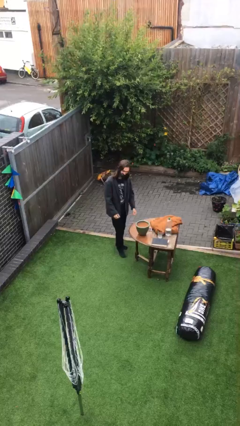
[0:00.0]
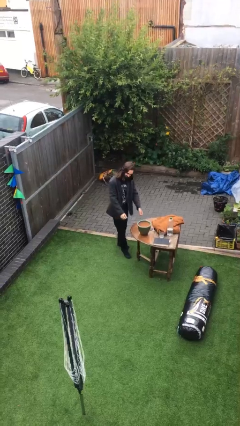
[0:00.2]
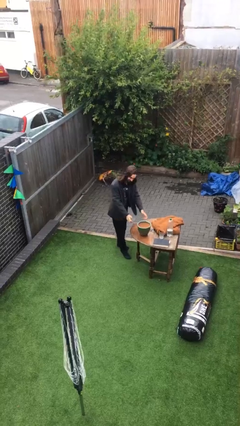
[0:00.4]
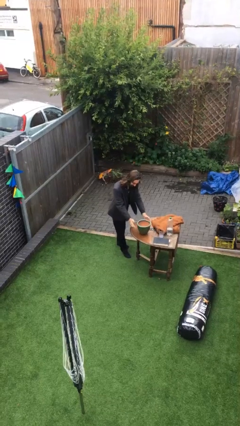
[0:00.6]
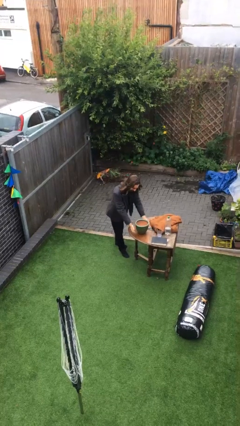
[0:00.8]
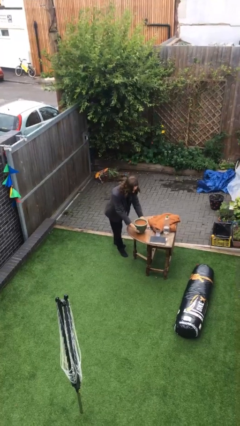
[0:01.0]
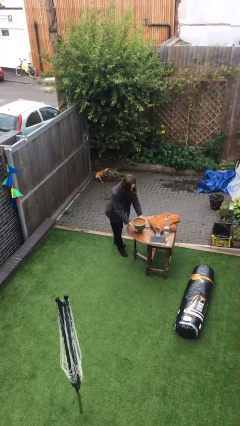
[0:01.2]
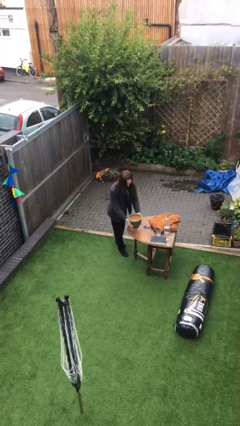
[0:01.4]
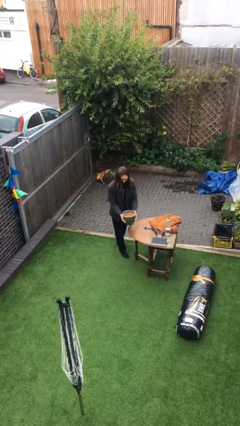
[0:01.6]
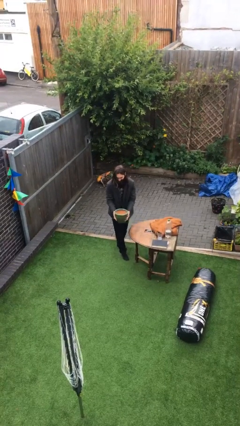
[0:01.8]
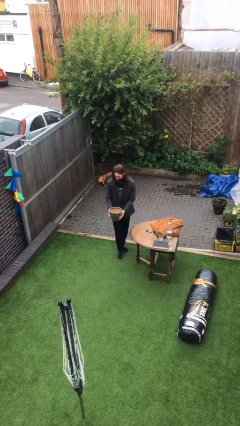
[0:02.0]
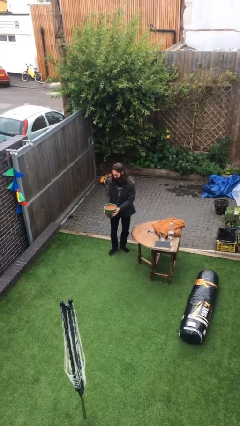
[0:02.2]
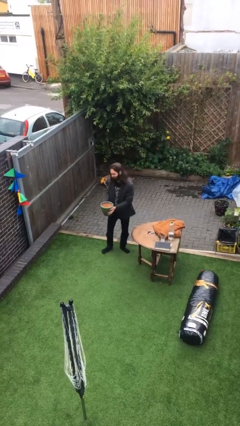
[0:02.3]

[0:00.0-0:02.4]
person picks up object from table

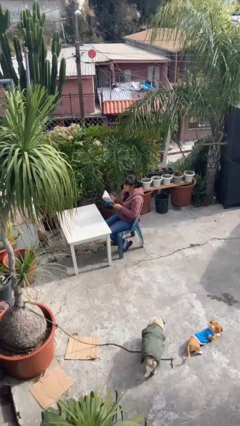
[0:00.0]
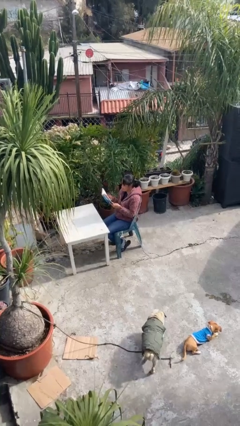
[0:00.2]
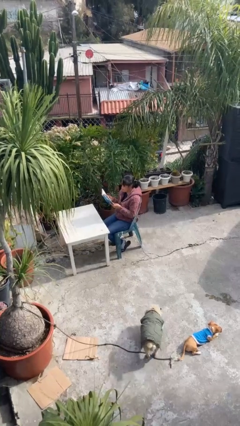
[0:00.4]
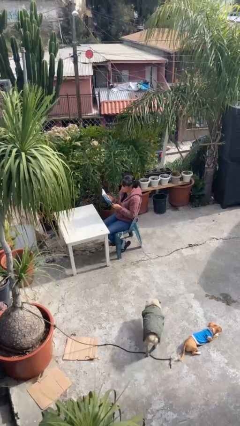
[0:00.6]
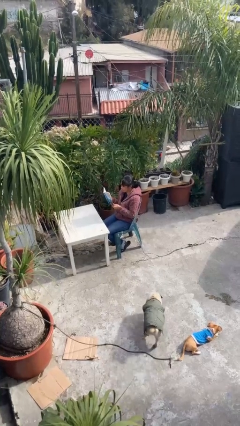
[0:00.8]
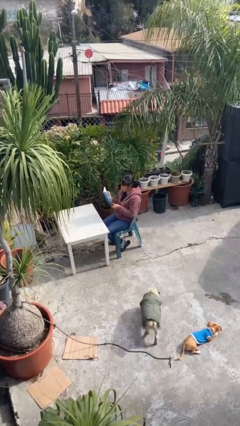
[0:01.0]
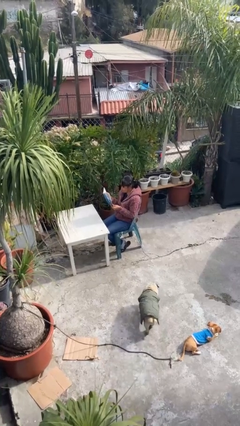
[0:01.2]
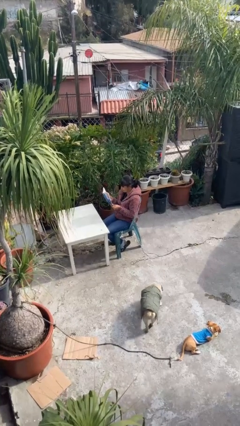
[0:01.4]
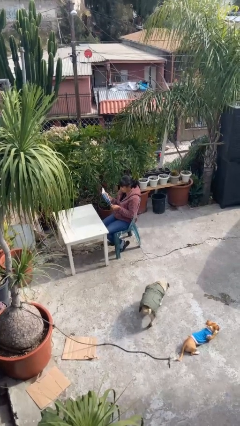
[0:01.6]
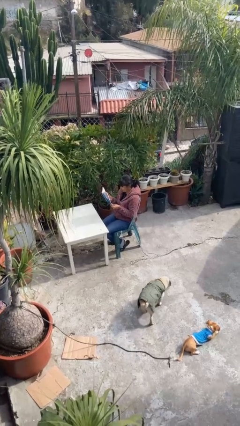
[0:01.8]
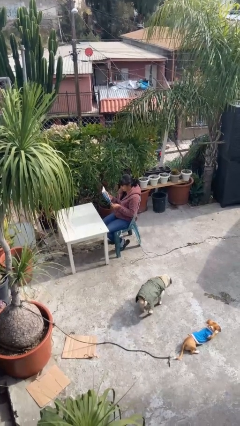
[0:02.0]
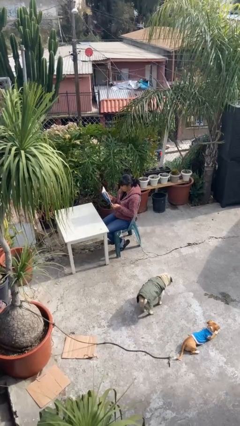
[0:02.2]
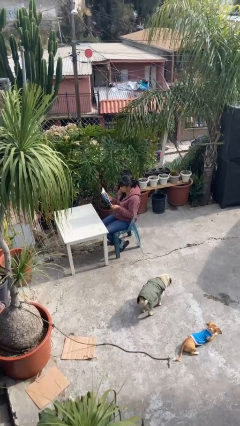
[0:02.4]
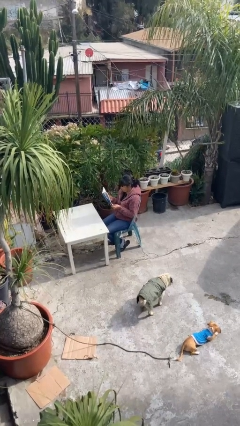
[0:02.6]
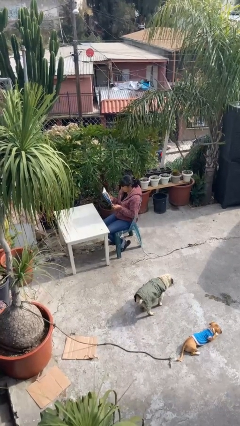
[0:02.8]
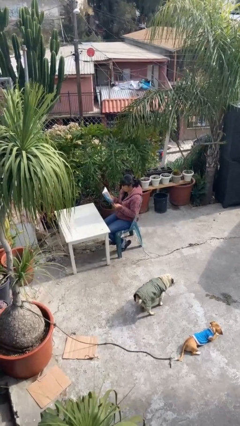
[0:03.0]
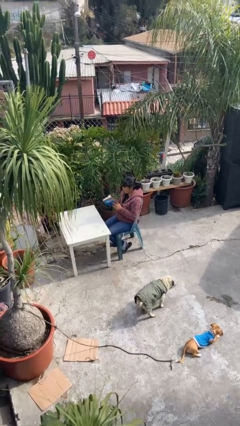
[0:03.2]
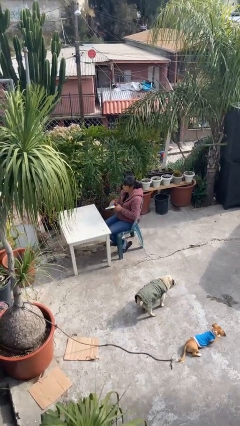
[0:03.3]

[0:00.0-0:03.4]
person reads document

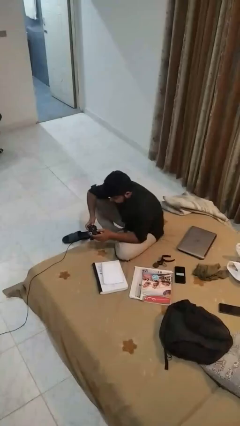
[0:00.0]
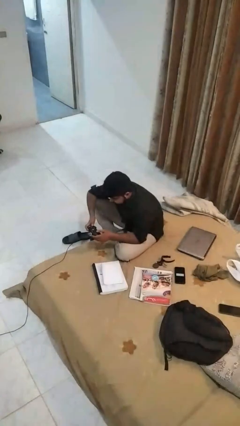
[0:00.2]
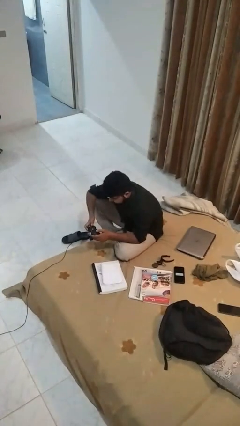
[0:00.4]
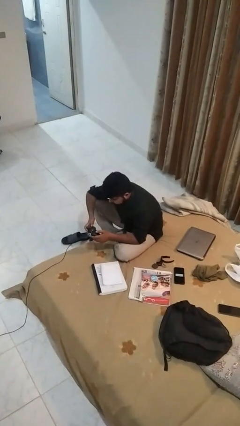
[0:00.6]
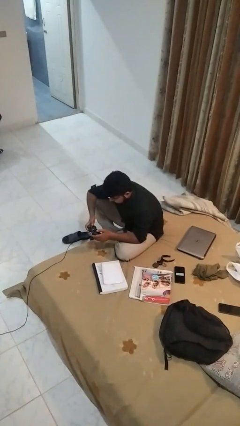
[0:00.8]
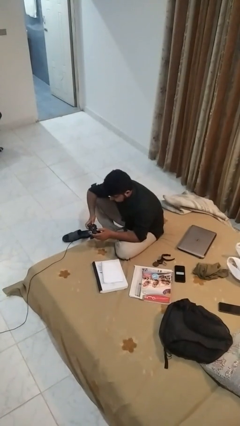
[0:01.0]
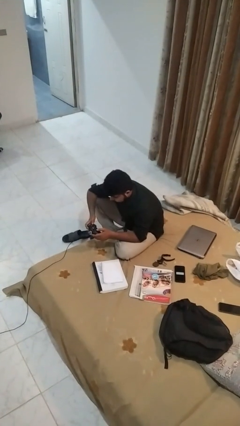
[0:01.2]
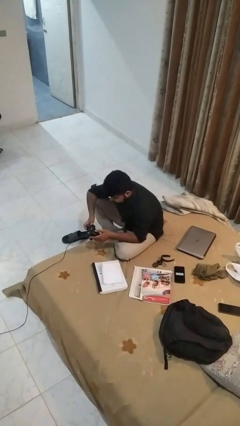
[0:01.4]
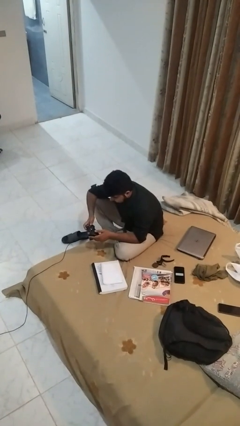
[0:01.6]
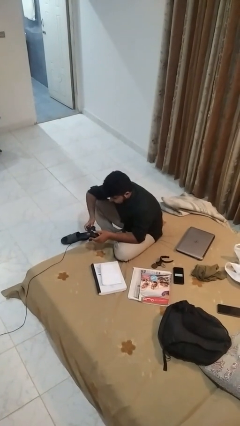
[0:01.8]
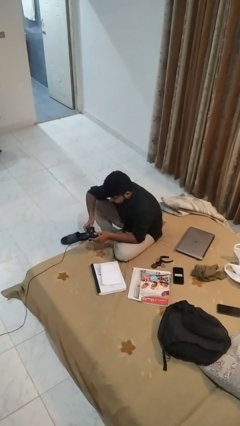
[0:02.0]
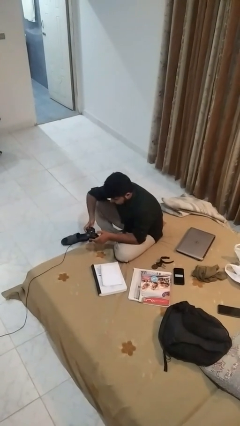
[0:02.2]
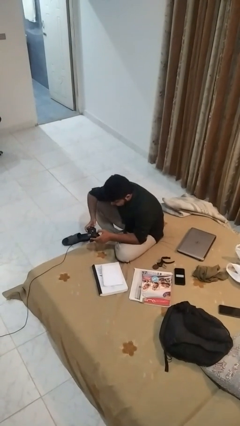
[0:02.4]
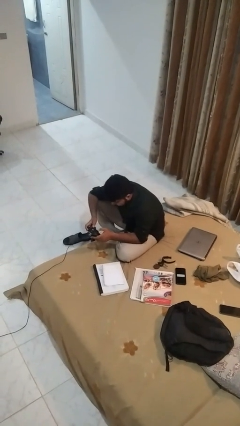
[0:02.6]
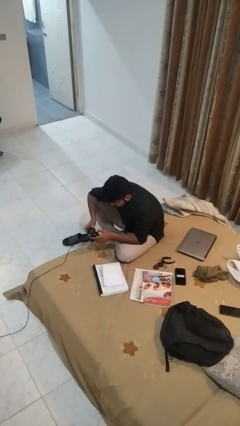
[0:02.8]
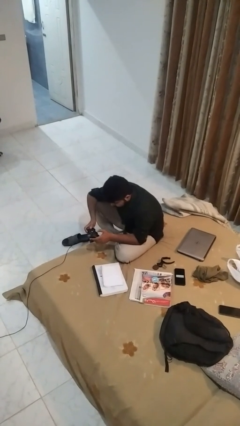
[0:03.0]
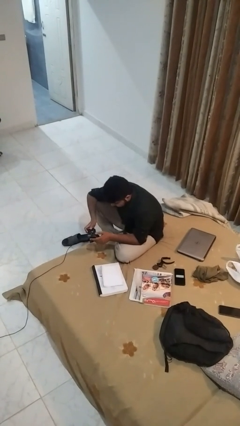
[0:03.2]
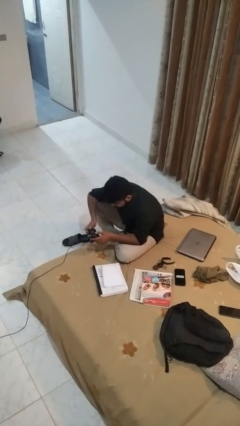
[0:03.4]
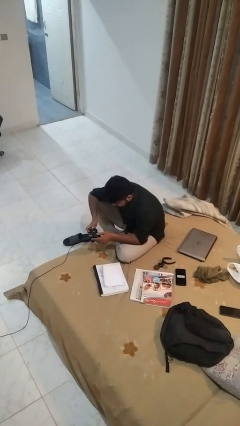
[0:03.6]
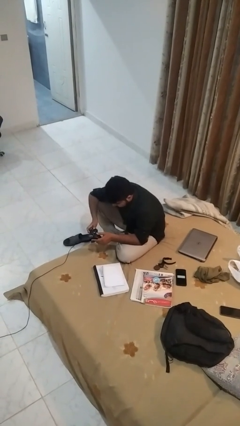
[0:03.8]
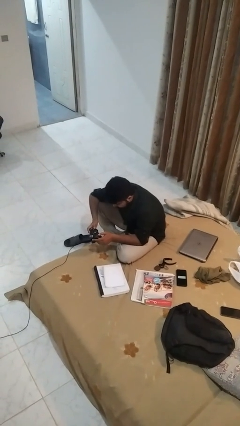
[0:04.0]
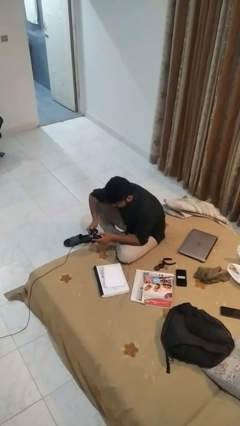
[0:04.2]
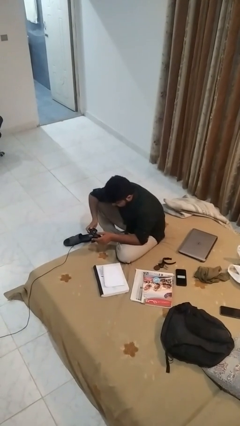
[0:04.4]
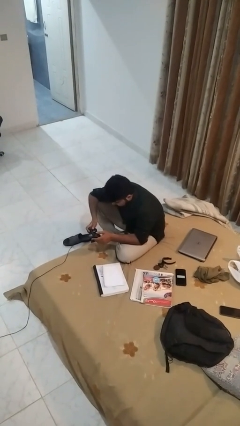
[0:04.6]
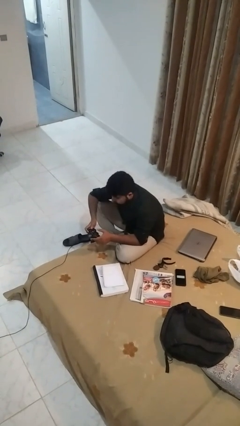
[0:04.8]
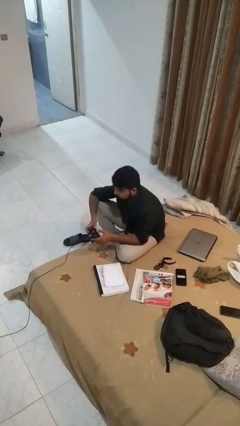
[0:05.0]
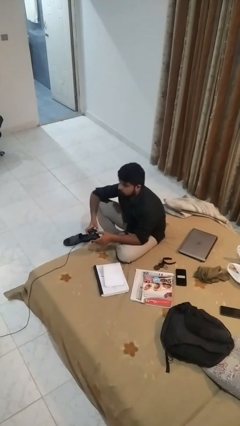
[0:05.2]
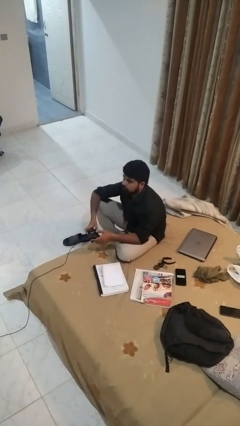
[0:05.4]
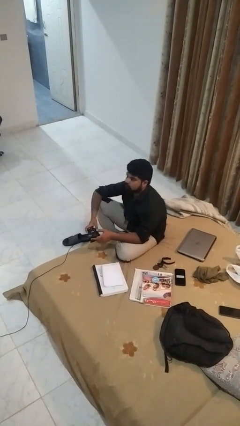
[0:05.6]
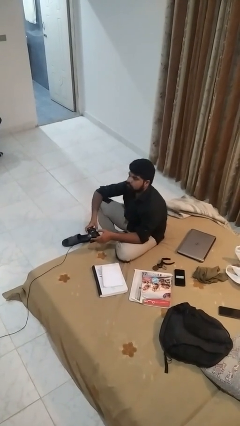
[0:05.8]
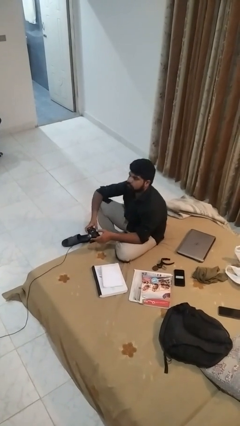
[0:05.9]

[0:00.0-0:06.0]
person interacts with handheld game

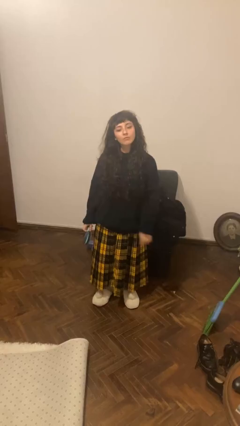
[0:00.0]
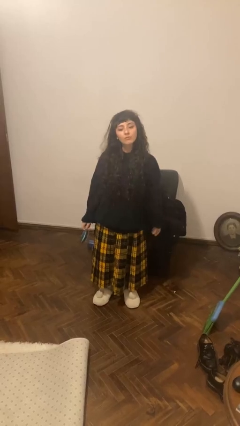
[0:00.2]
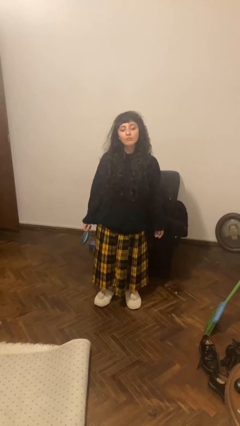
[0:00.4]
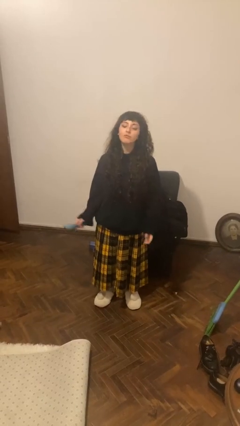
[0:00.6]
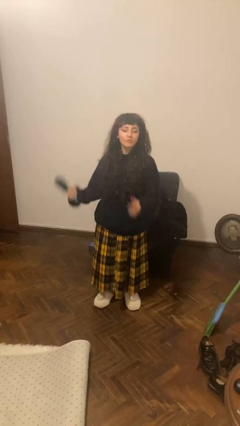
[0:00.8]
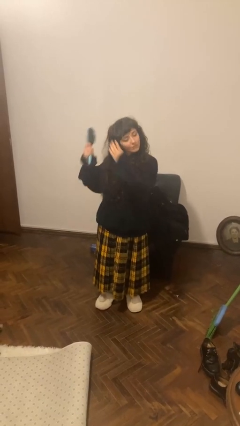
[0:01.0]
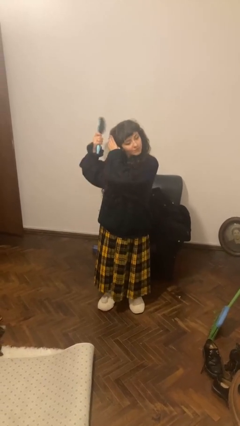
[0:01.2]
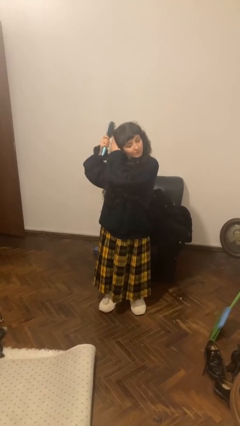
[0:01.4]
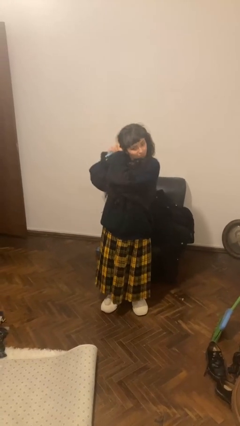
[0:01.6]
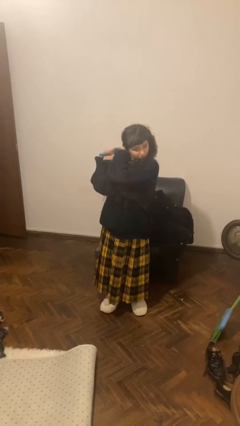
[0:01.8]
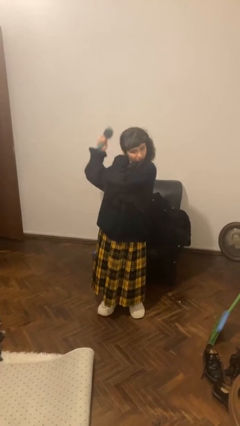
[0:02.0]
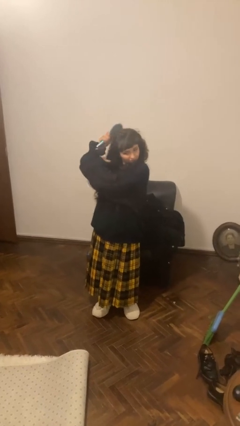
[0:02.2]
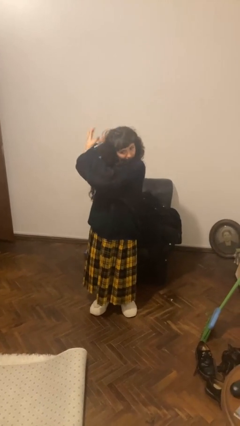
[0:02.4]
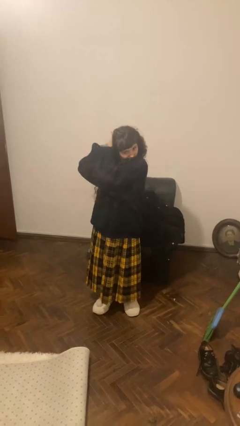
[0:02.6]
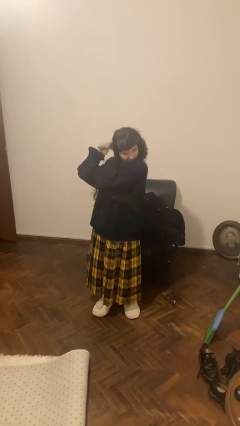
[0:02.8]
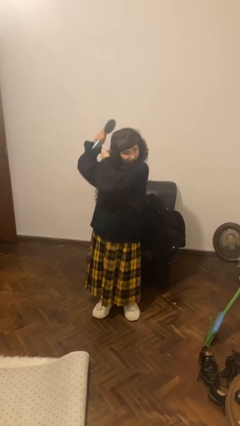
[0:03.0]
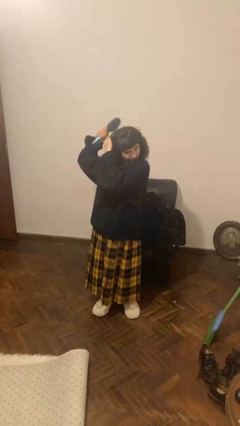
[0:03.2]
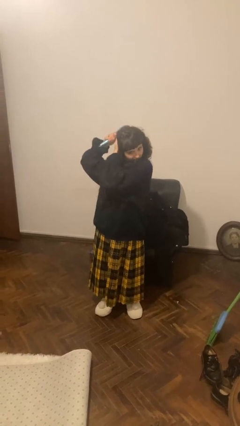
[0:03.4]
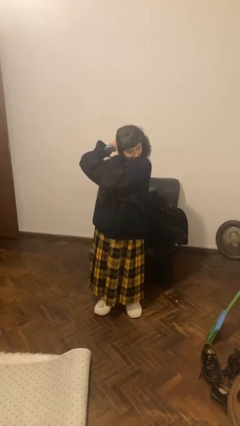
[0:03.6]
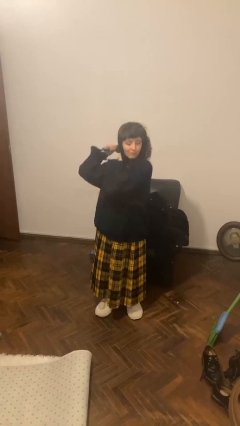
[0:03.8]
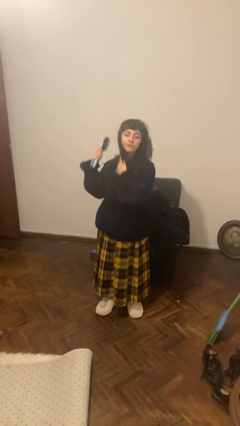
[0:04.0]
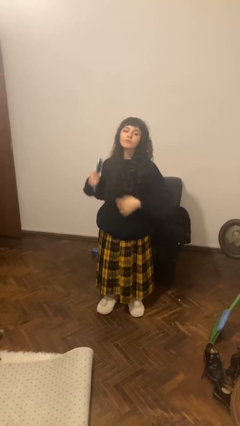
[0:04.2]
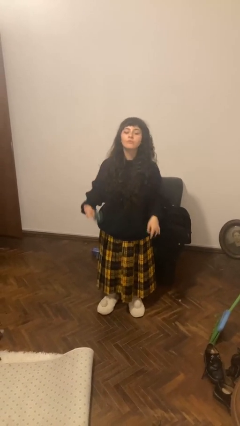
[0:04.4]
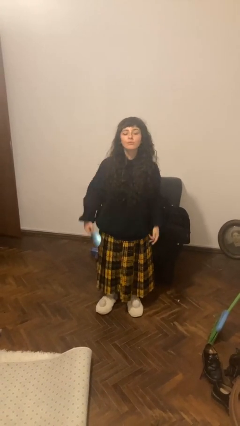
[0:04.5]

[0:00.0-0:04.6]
person brushes hair

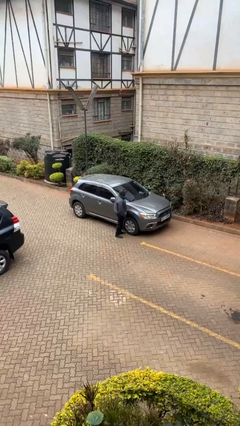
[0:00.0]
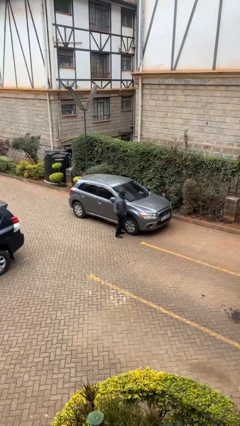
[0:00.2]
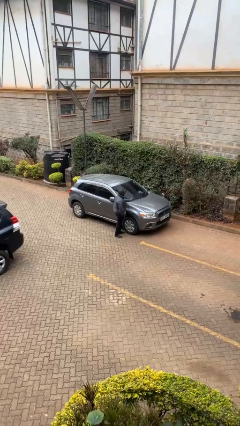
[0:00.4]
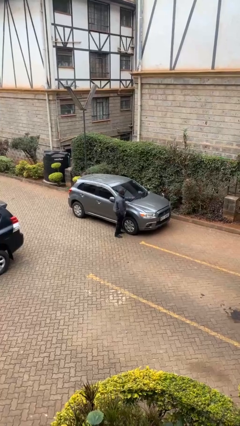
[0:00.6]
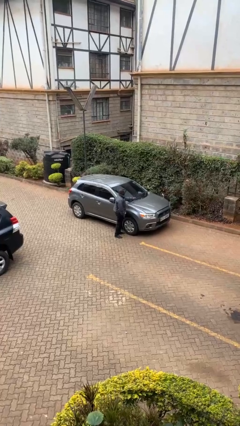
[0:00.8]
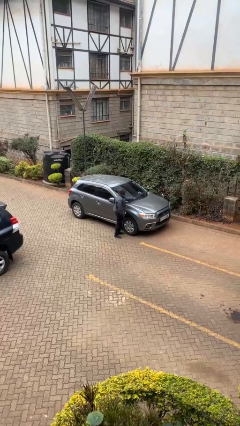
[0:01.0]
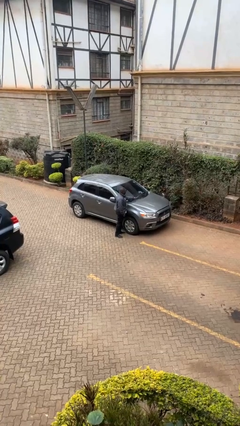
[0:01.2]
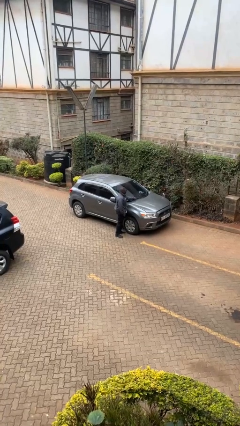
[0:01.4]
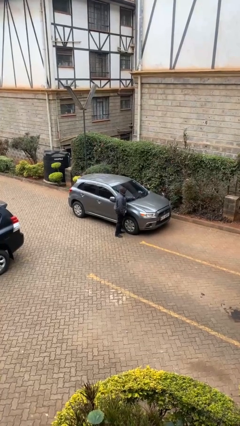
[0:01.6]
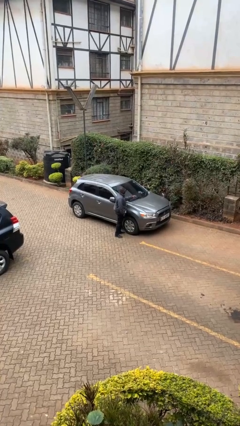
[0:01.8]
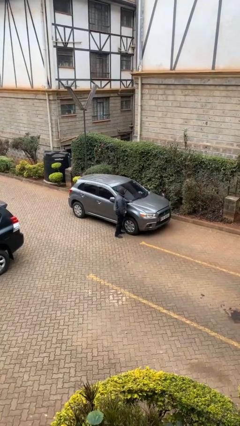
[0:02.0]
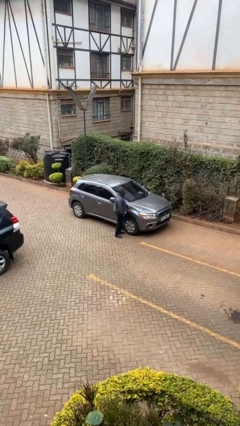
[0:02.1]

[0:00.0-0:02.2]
person flips down car wipers
